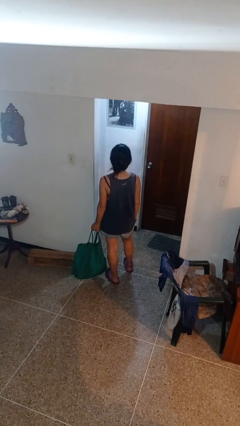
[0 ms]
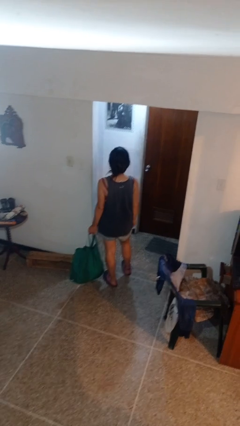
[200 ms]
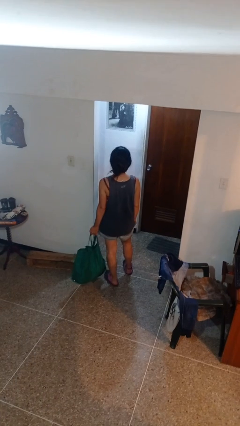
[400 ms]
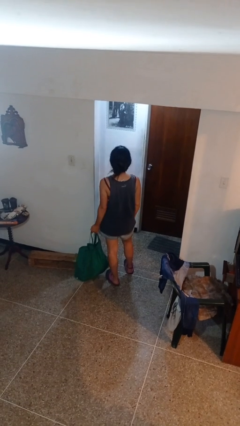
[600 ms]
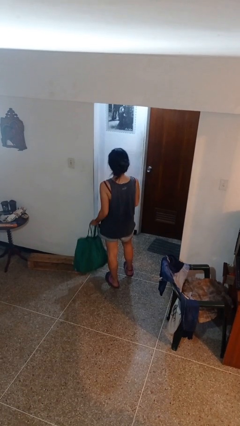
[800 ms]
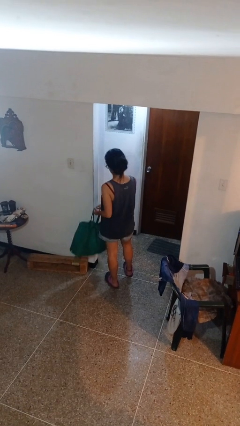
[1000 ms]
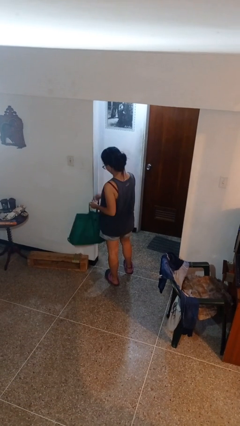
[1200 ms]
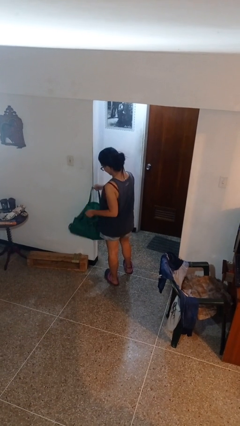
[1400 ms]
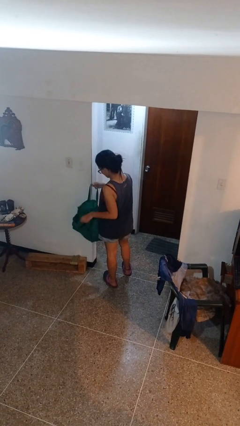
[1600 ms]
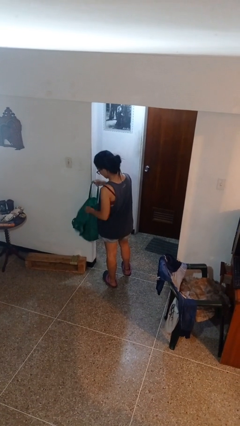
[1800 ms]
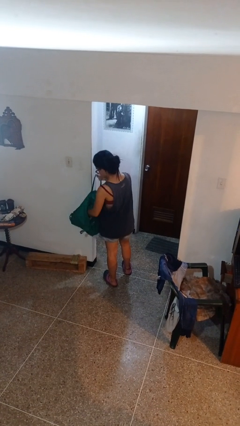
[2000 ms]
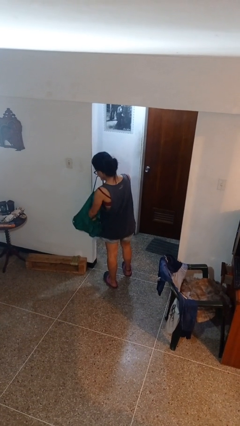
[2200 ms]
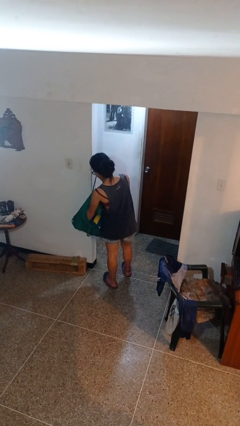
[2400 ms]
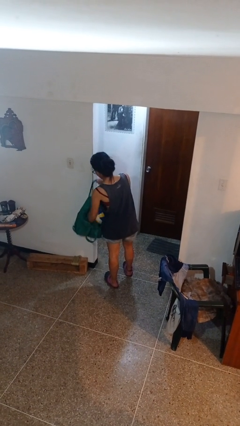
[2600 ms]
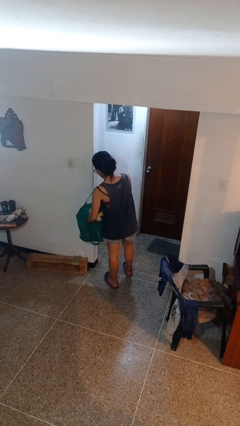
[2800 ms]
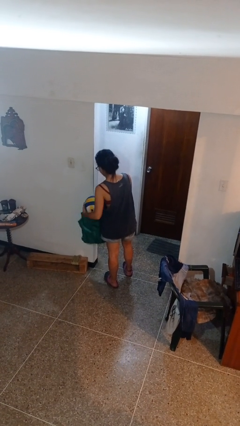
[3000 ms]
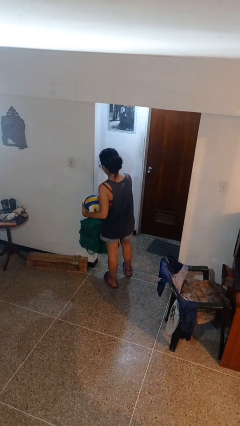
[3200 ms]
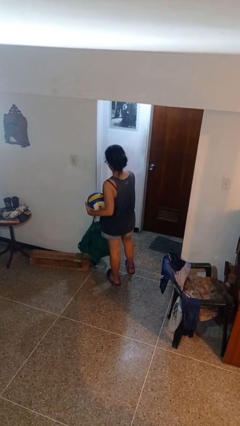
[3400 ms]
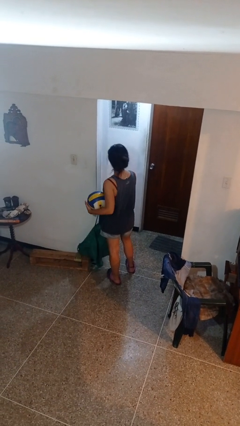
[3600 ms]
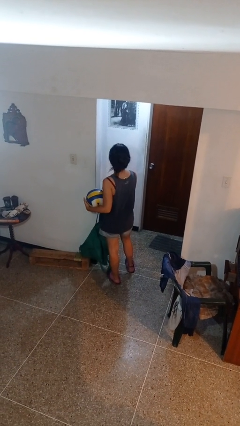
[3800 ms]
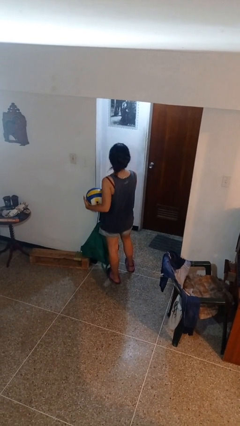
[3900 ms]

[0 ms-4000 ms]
person takes object from bag

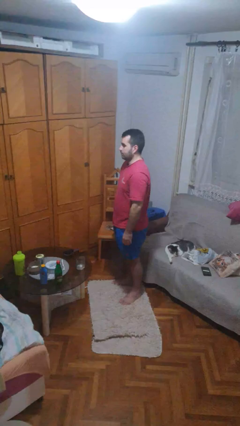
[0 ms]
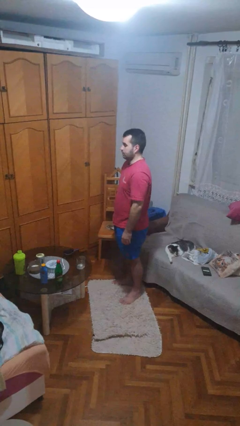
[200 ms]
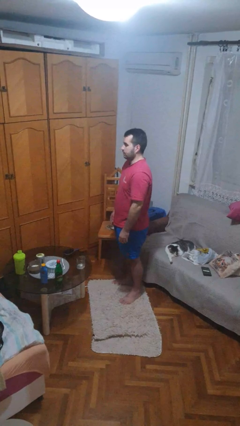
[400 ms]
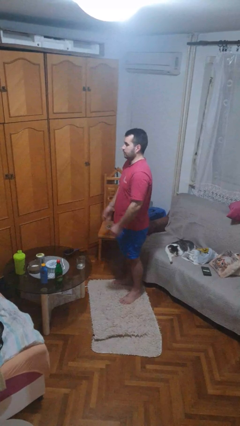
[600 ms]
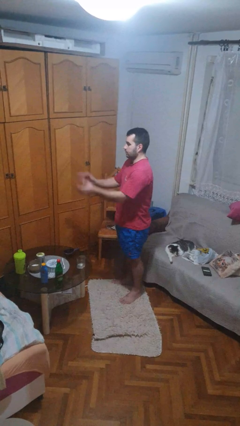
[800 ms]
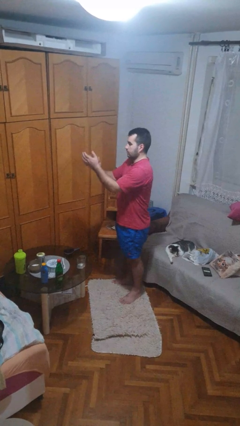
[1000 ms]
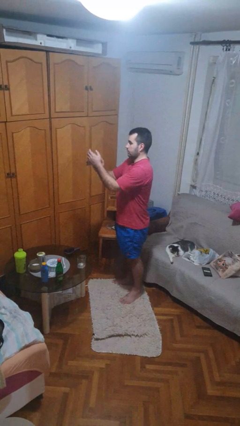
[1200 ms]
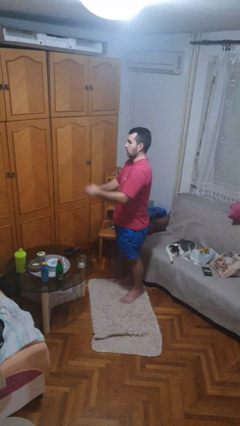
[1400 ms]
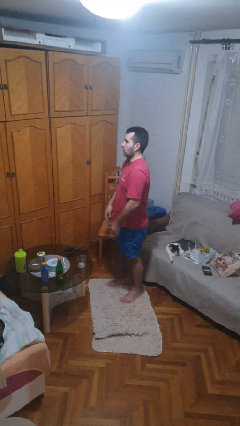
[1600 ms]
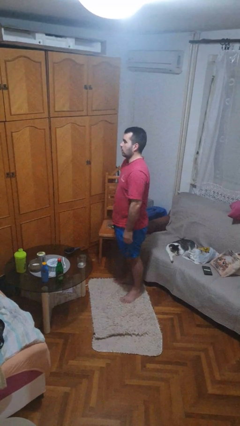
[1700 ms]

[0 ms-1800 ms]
person claps hands

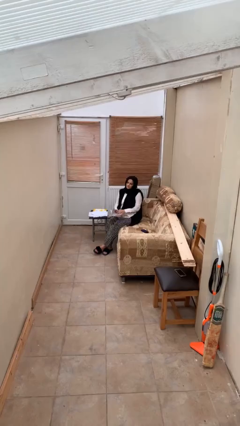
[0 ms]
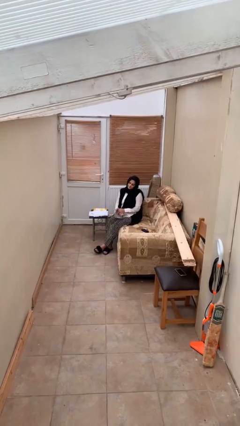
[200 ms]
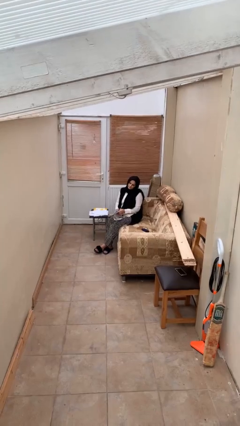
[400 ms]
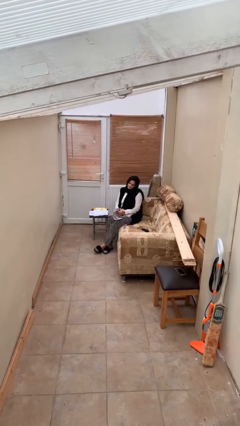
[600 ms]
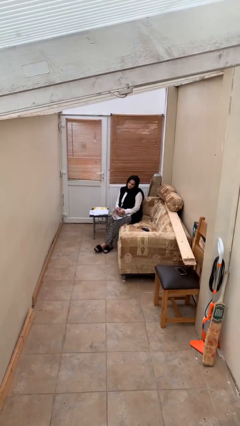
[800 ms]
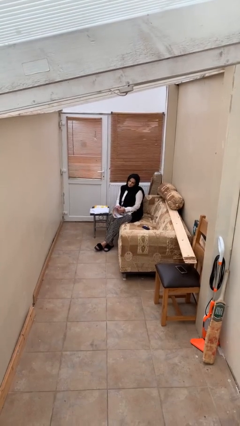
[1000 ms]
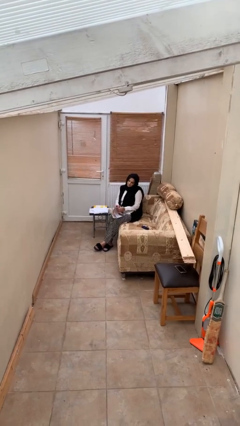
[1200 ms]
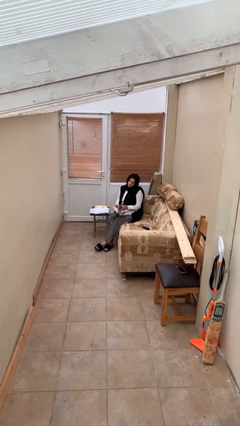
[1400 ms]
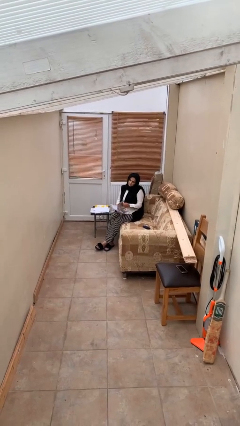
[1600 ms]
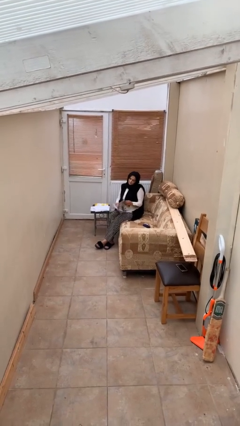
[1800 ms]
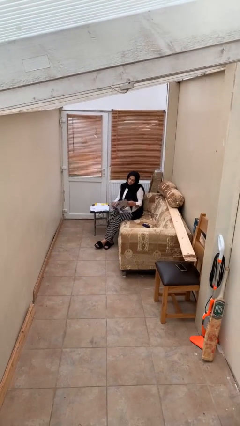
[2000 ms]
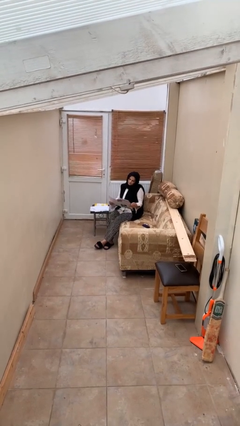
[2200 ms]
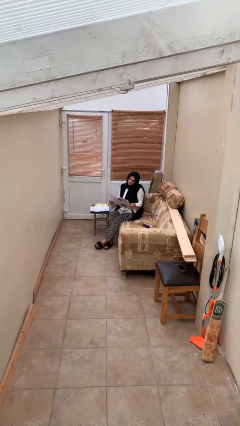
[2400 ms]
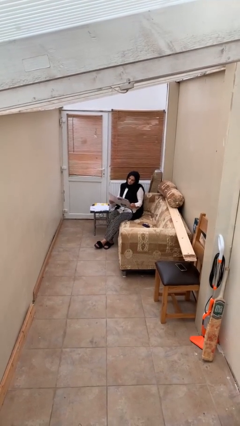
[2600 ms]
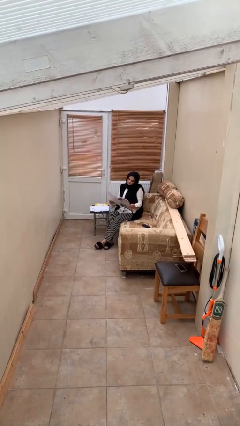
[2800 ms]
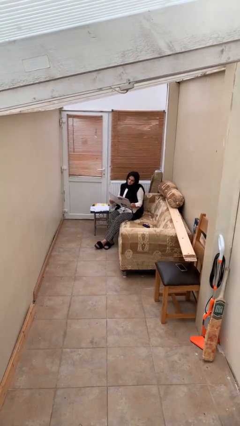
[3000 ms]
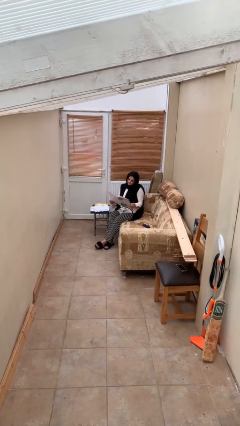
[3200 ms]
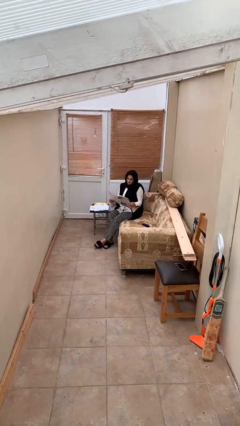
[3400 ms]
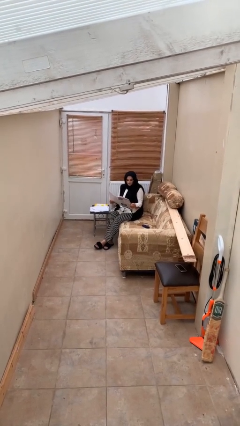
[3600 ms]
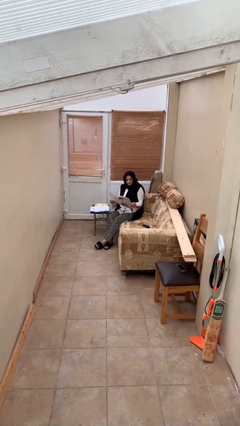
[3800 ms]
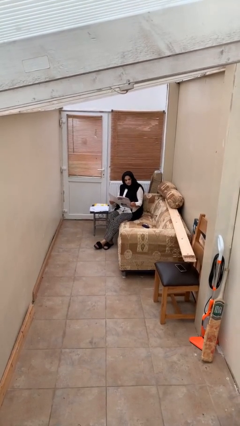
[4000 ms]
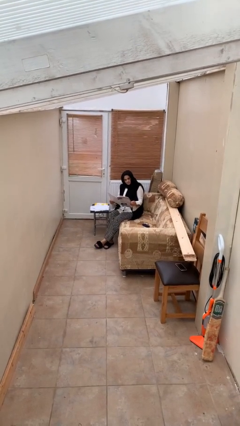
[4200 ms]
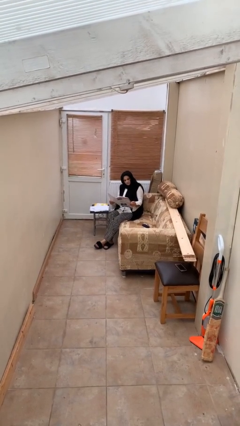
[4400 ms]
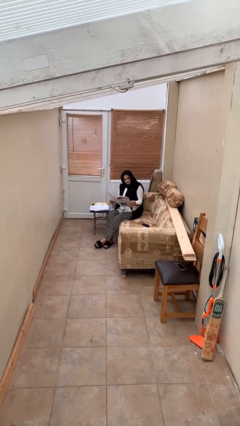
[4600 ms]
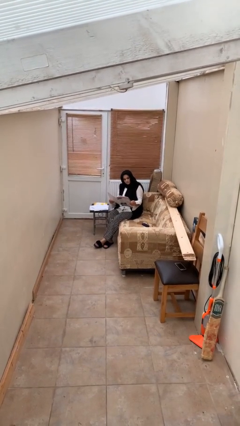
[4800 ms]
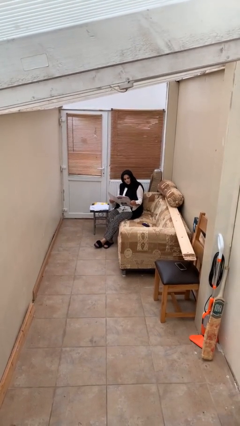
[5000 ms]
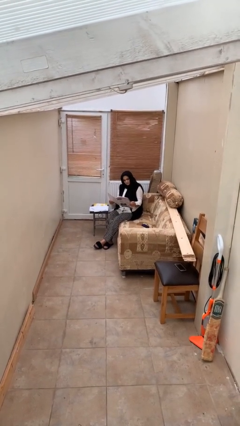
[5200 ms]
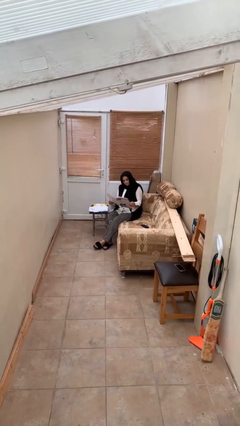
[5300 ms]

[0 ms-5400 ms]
person reads document

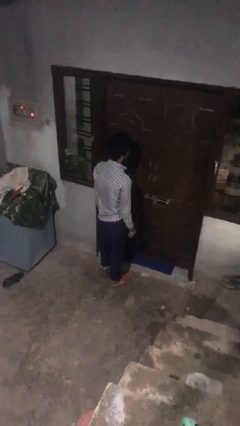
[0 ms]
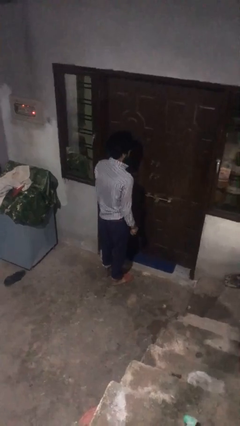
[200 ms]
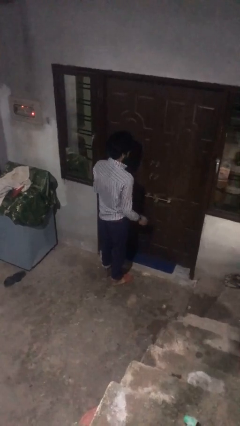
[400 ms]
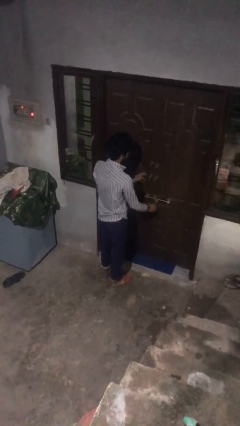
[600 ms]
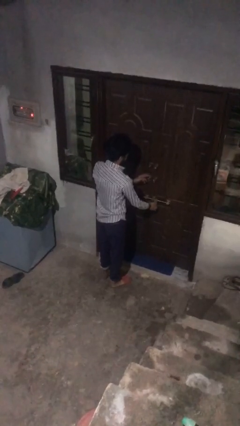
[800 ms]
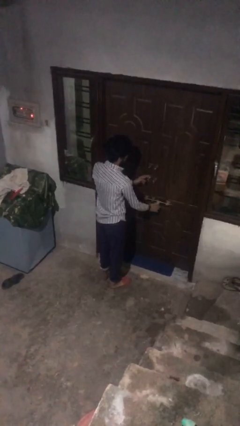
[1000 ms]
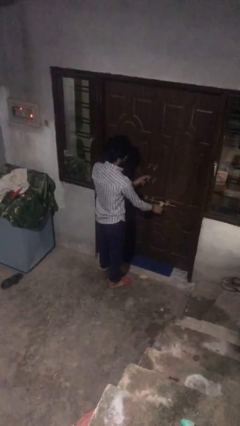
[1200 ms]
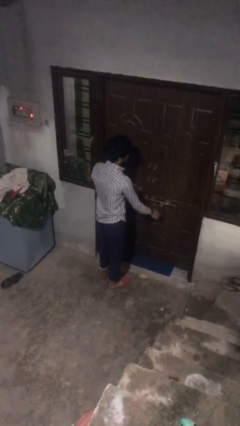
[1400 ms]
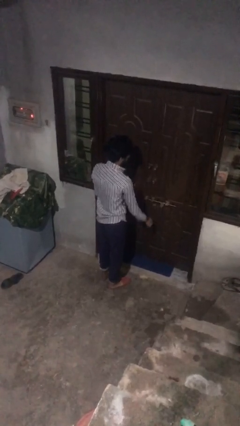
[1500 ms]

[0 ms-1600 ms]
person unlocks door with keys

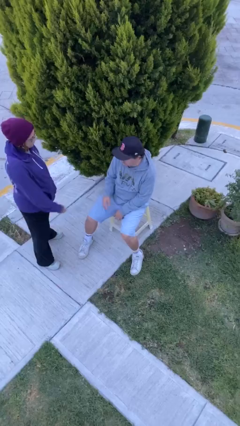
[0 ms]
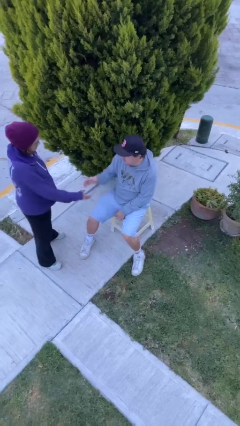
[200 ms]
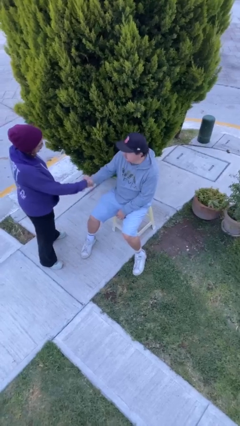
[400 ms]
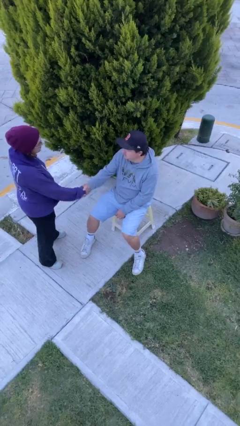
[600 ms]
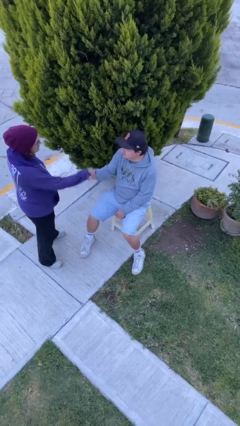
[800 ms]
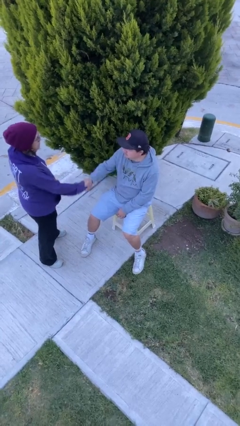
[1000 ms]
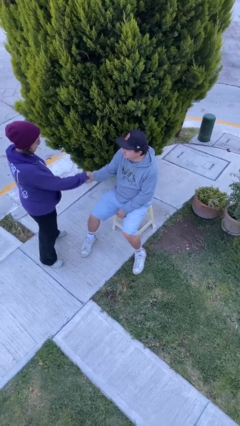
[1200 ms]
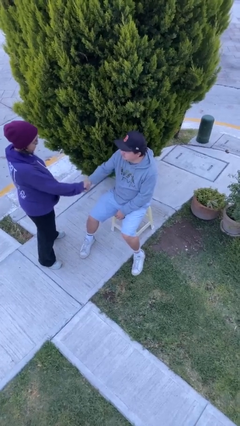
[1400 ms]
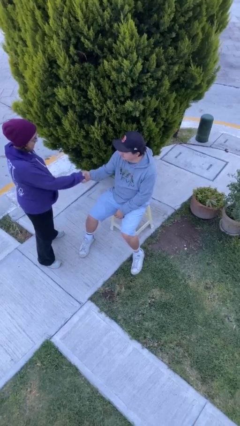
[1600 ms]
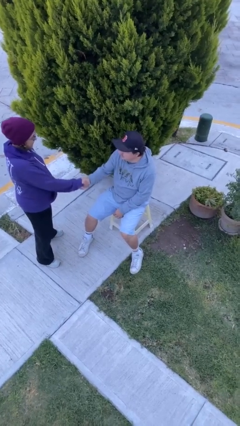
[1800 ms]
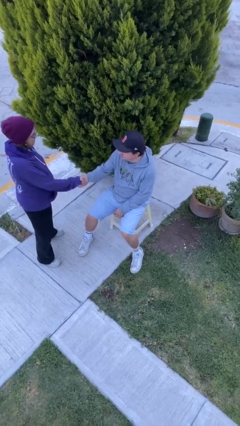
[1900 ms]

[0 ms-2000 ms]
person shakes hand

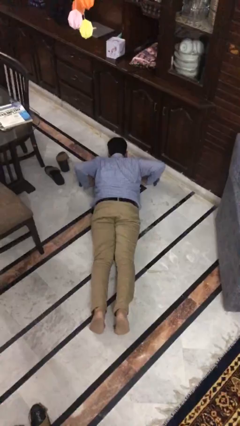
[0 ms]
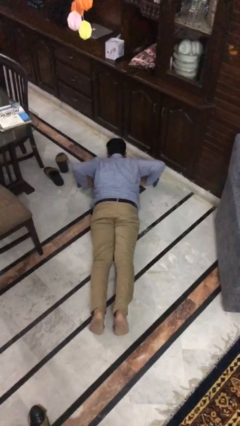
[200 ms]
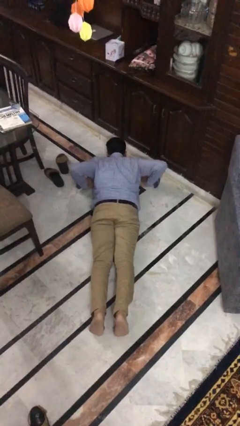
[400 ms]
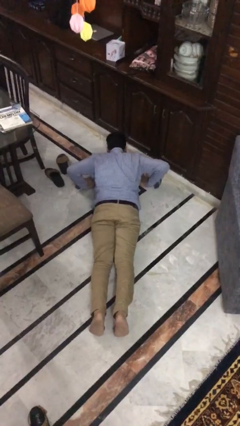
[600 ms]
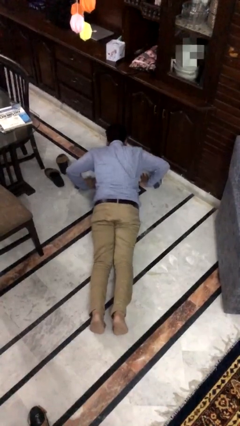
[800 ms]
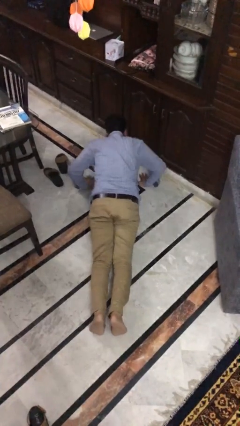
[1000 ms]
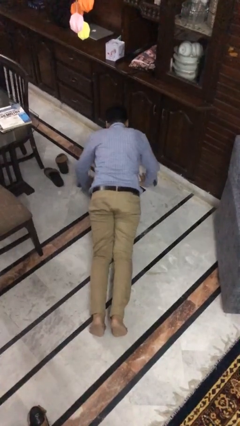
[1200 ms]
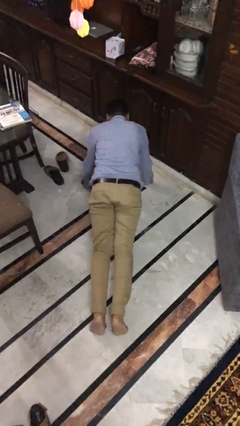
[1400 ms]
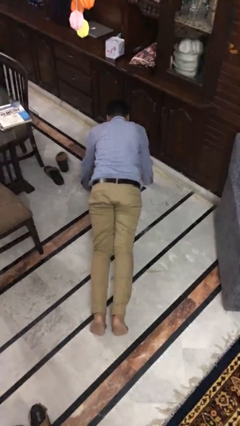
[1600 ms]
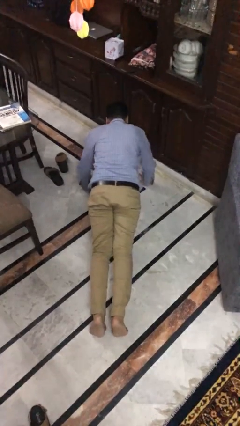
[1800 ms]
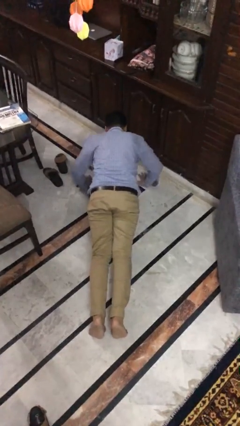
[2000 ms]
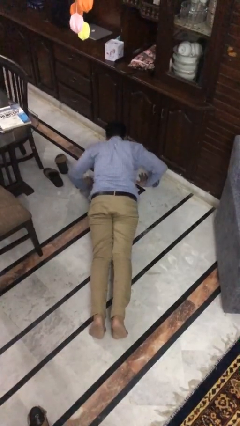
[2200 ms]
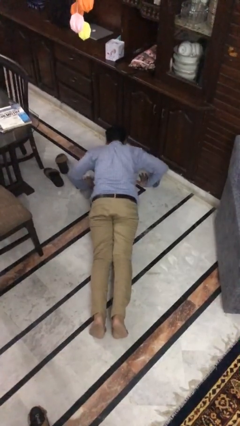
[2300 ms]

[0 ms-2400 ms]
person exercises with pushup

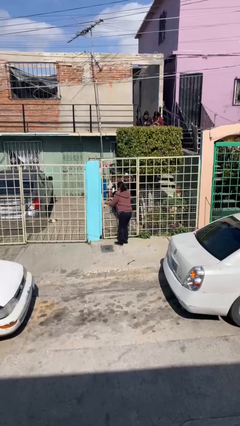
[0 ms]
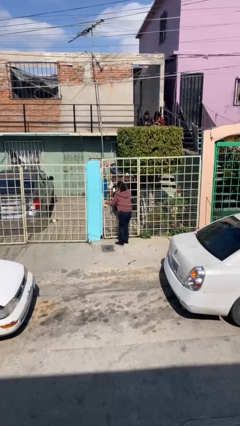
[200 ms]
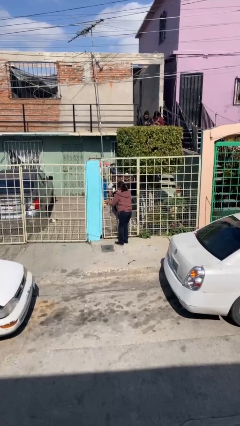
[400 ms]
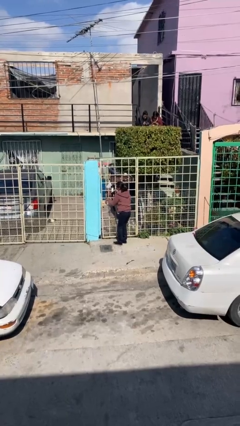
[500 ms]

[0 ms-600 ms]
person closes facility door
